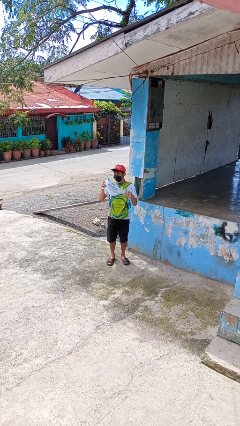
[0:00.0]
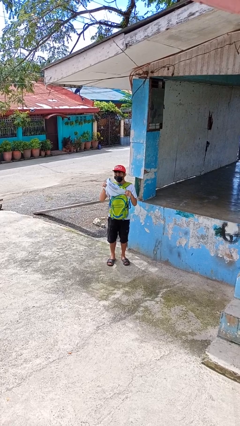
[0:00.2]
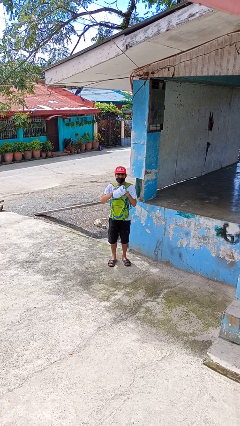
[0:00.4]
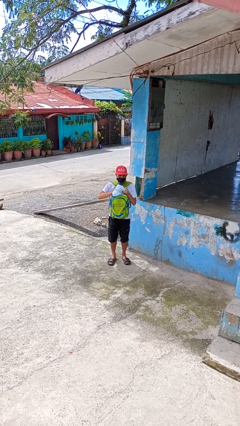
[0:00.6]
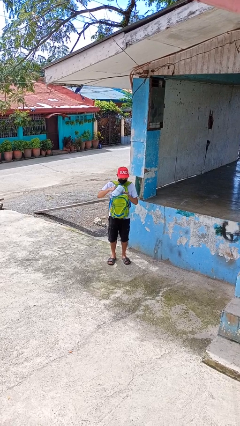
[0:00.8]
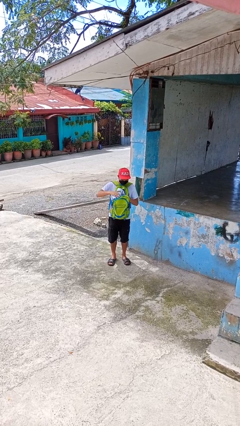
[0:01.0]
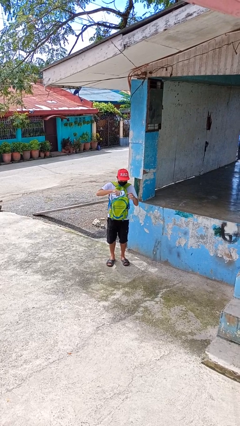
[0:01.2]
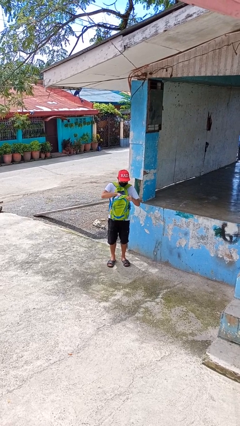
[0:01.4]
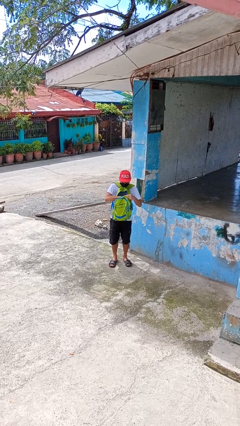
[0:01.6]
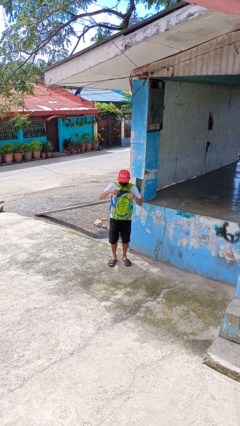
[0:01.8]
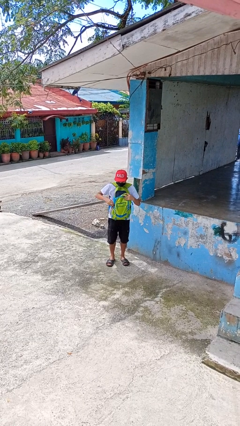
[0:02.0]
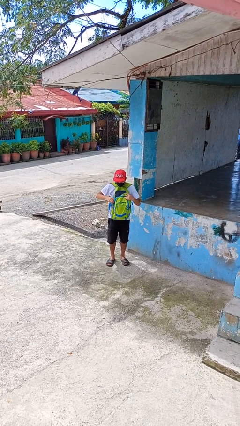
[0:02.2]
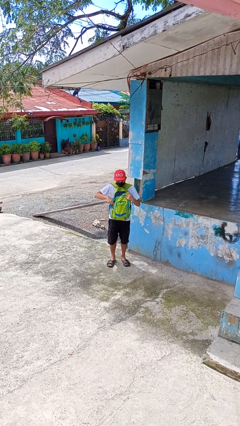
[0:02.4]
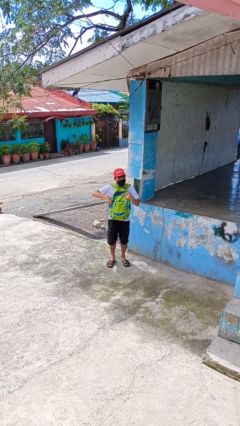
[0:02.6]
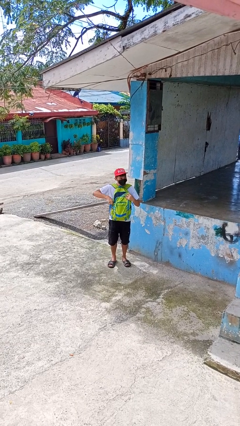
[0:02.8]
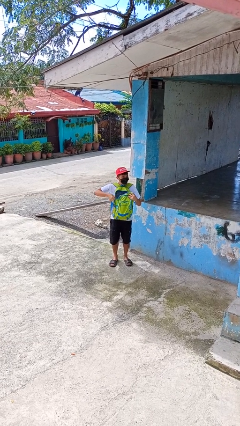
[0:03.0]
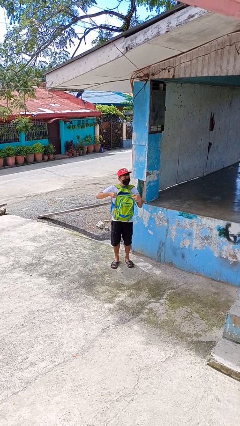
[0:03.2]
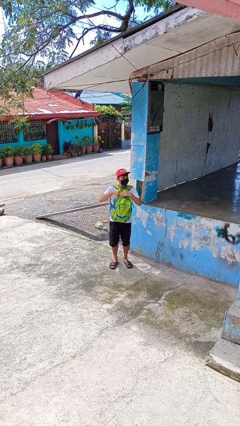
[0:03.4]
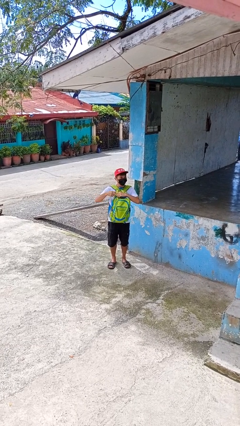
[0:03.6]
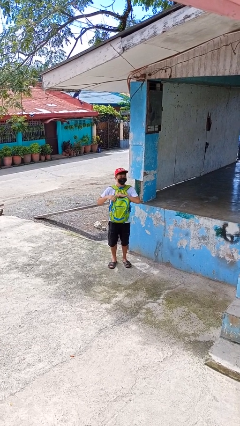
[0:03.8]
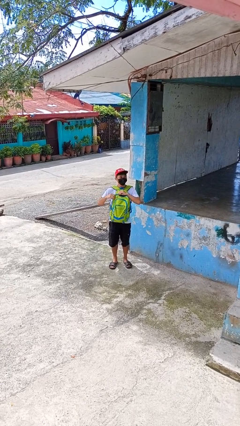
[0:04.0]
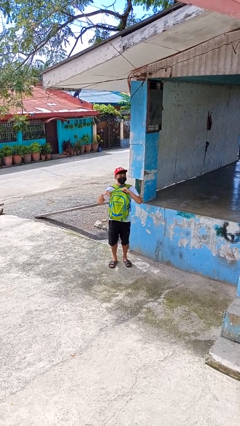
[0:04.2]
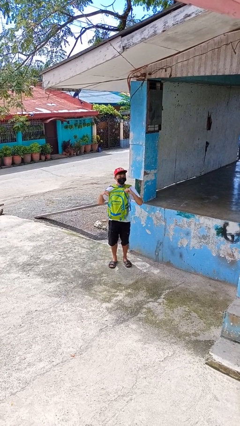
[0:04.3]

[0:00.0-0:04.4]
person puts object into backpack

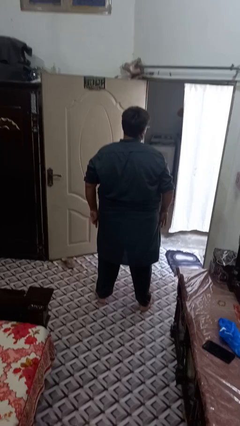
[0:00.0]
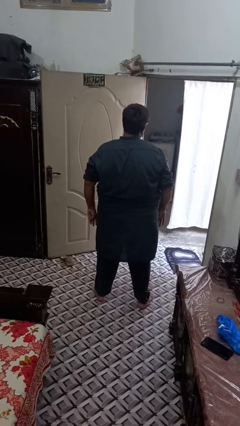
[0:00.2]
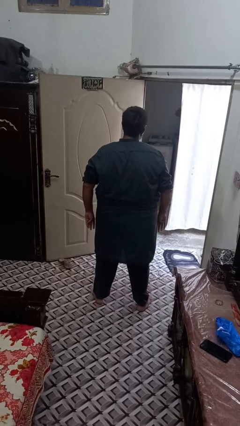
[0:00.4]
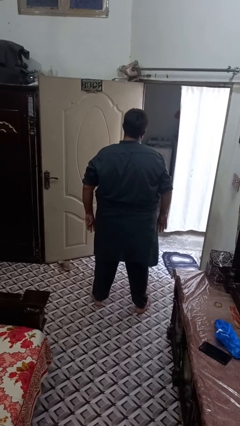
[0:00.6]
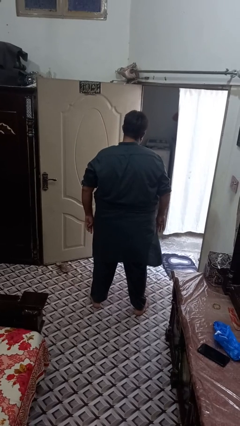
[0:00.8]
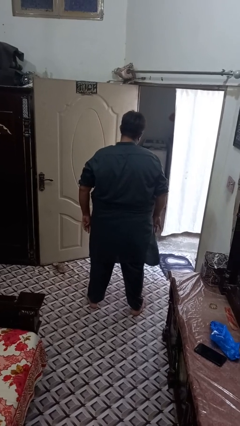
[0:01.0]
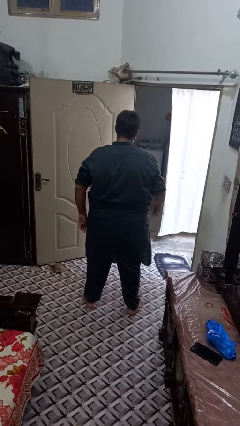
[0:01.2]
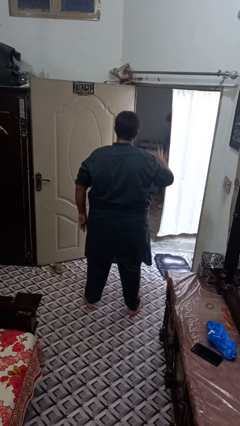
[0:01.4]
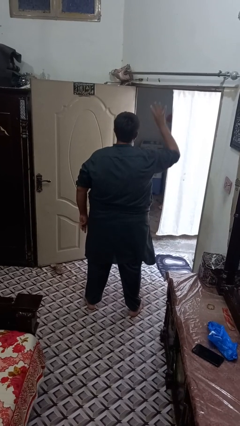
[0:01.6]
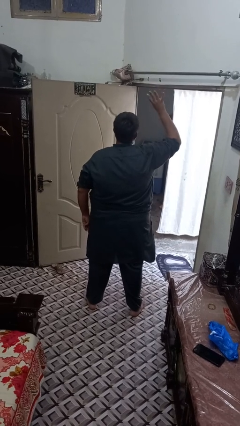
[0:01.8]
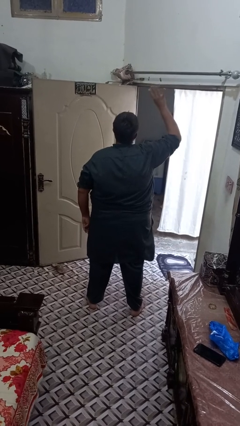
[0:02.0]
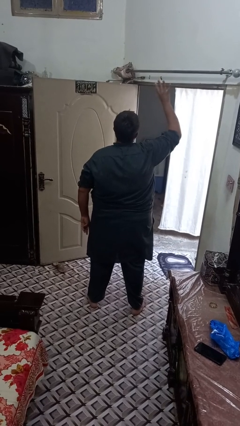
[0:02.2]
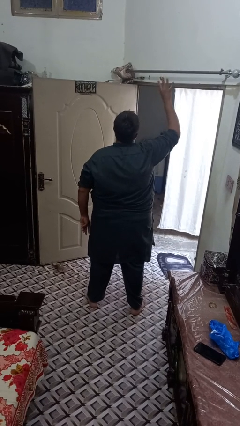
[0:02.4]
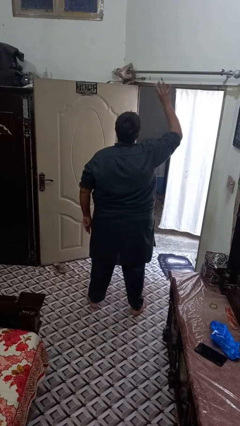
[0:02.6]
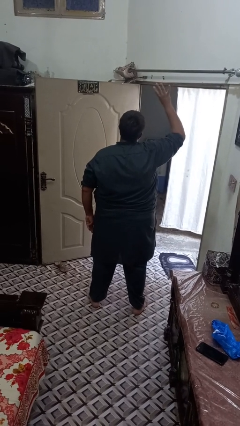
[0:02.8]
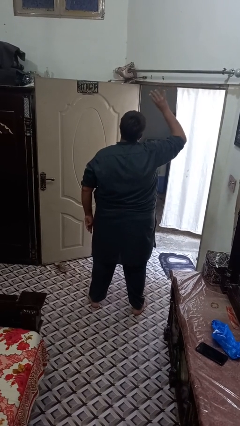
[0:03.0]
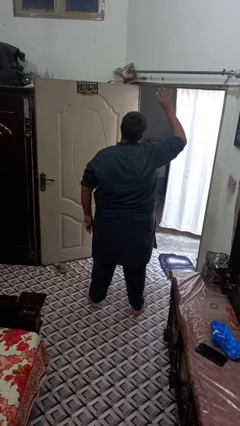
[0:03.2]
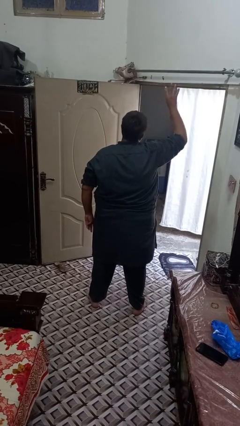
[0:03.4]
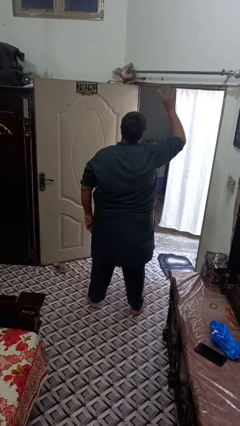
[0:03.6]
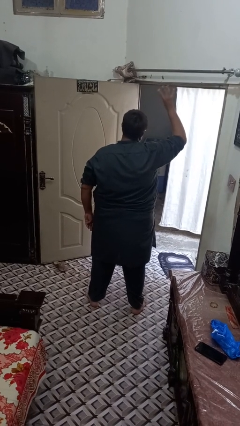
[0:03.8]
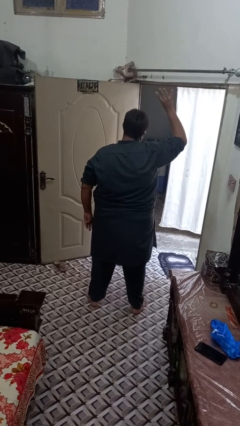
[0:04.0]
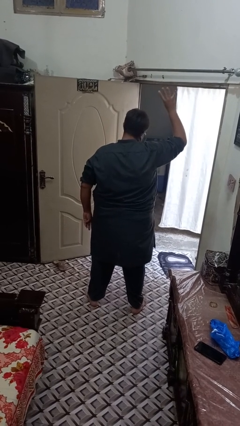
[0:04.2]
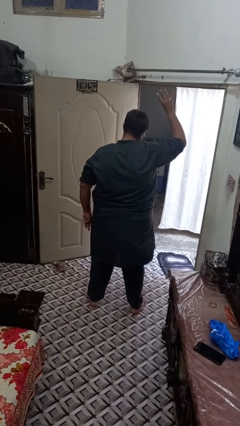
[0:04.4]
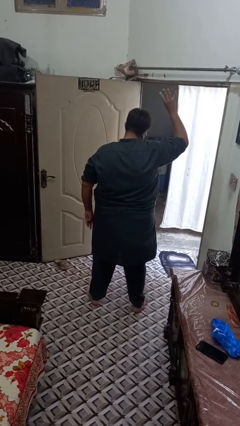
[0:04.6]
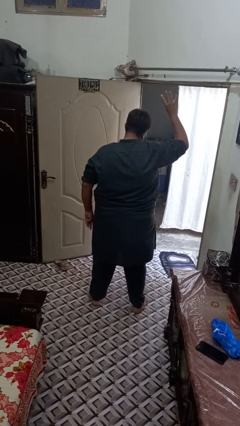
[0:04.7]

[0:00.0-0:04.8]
person gestures number four

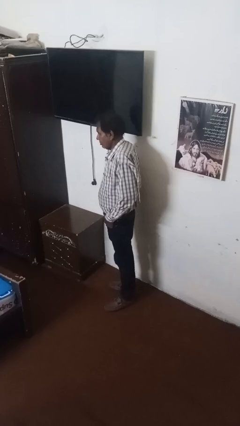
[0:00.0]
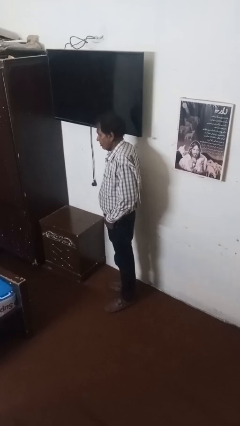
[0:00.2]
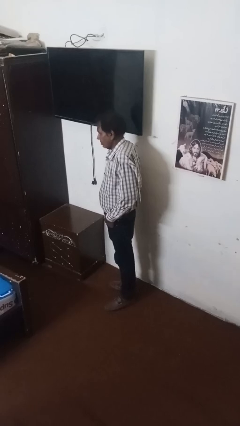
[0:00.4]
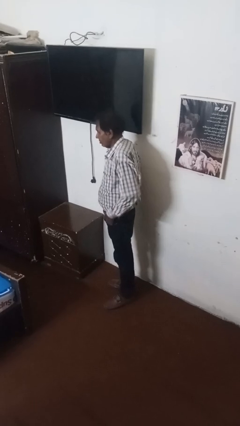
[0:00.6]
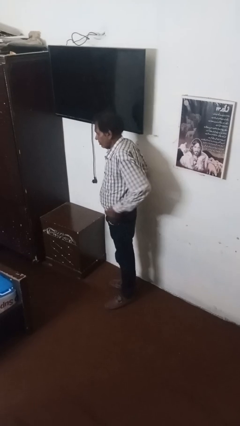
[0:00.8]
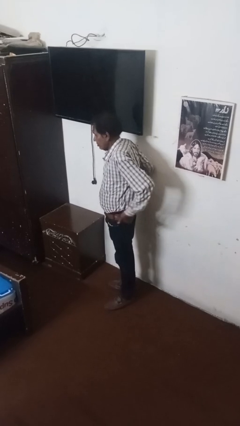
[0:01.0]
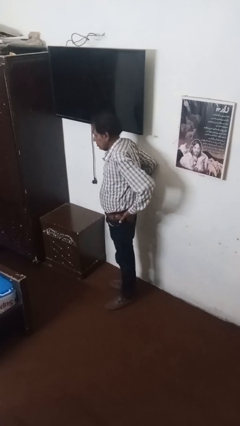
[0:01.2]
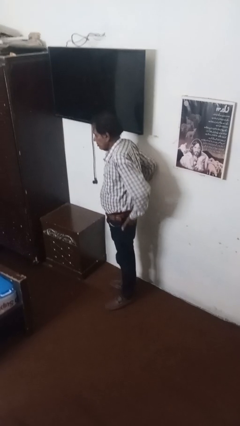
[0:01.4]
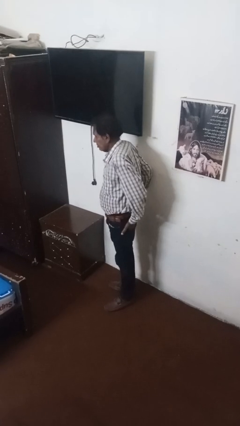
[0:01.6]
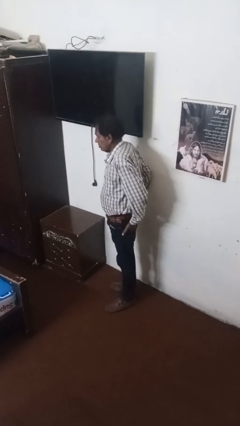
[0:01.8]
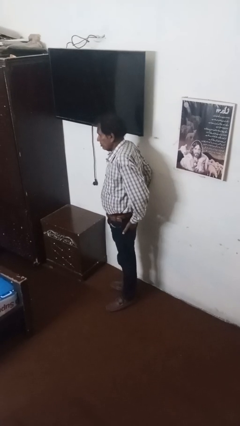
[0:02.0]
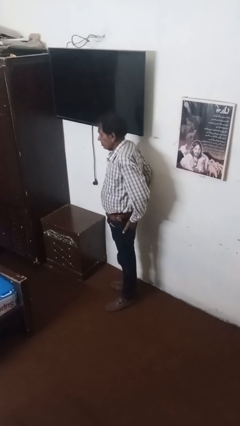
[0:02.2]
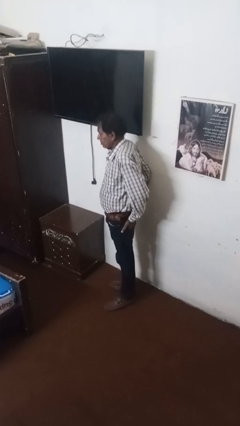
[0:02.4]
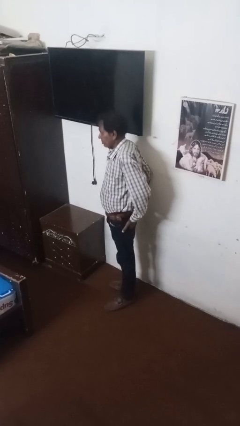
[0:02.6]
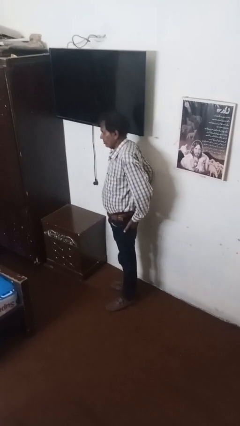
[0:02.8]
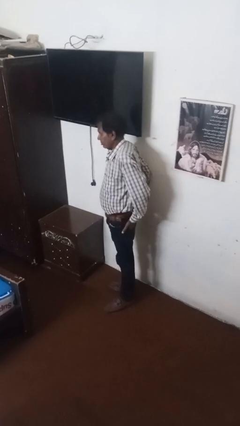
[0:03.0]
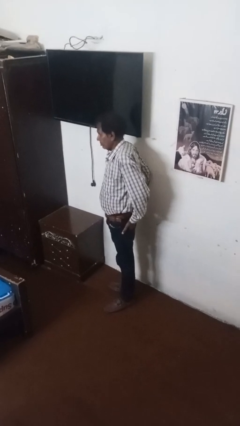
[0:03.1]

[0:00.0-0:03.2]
person puts hands in back pockets

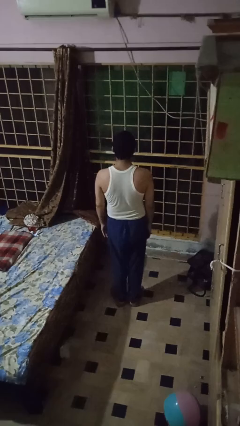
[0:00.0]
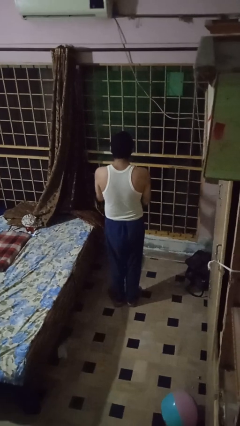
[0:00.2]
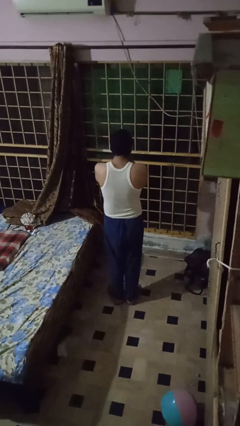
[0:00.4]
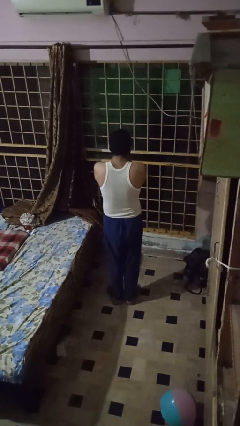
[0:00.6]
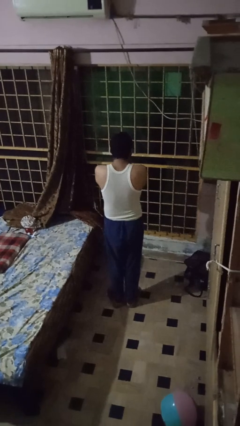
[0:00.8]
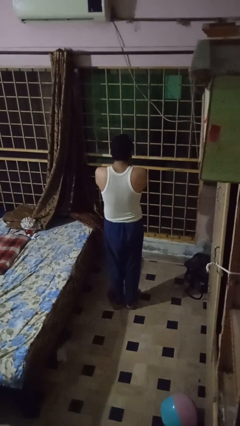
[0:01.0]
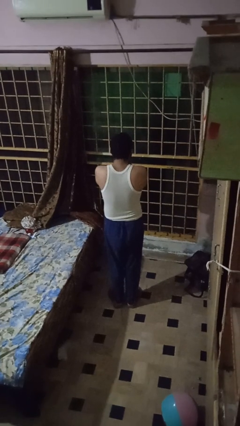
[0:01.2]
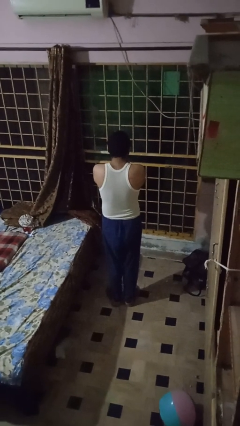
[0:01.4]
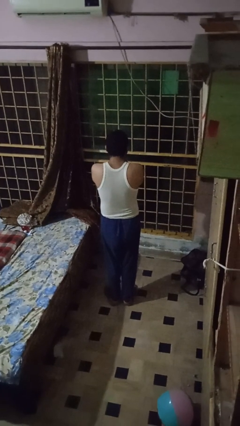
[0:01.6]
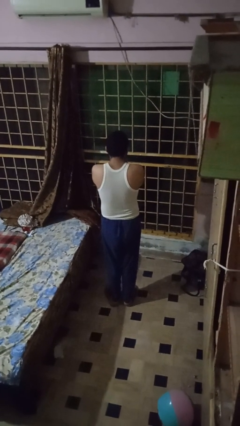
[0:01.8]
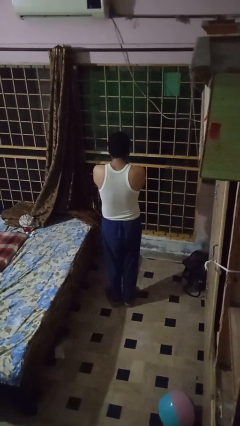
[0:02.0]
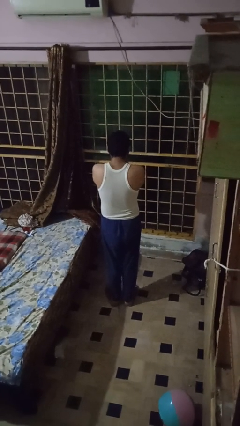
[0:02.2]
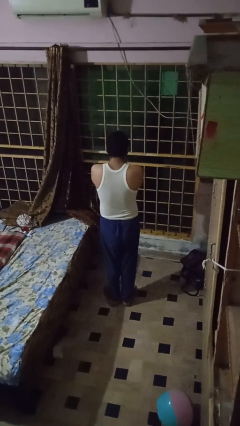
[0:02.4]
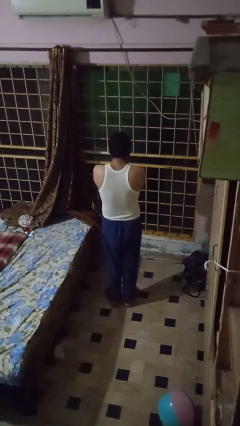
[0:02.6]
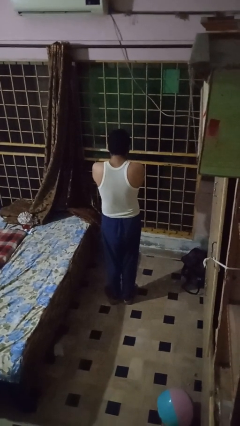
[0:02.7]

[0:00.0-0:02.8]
person covers face with hands

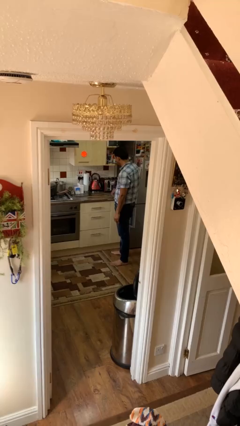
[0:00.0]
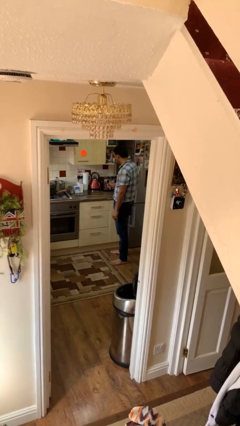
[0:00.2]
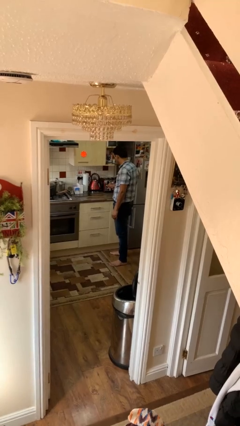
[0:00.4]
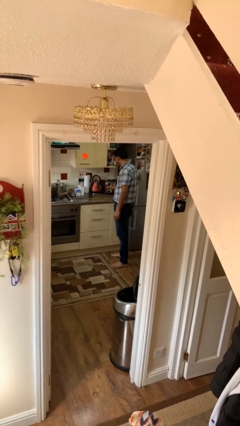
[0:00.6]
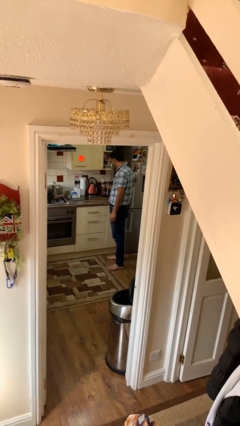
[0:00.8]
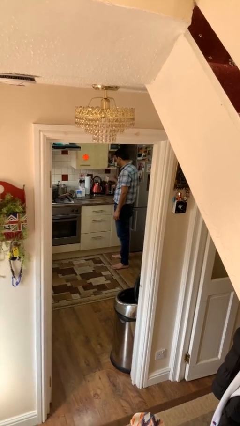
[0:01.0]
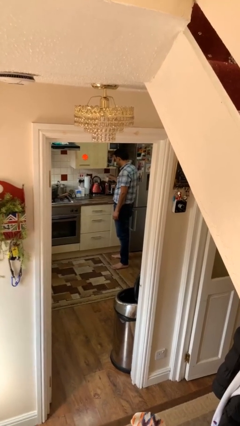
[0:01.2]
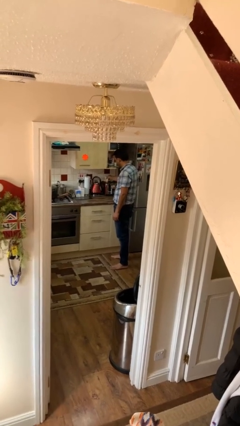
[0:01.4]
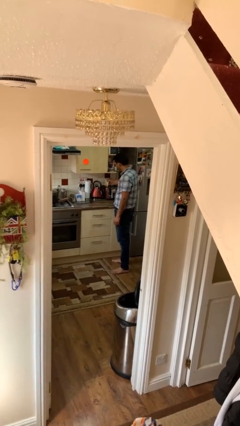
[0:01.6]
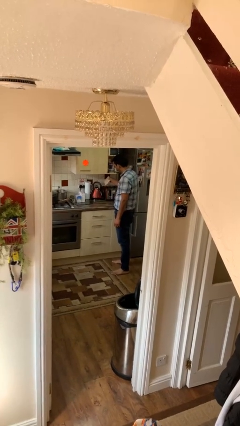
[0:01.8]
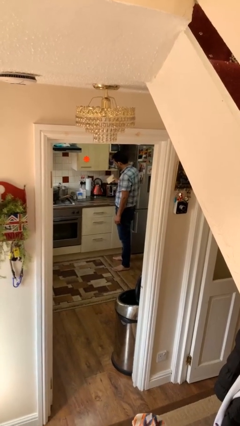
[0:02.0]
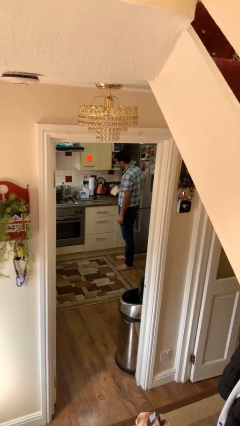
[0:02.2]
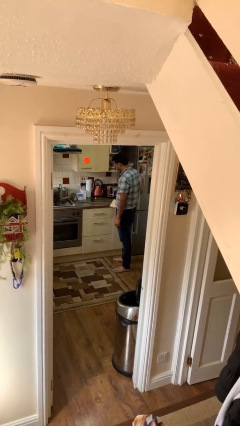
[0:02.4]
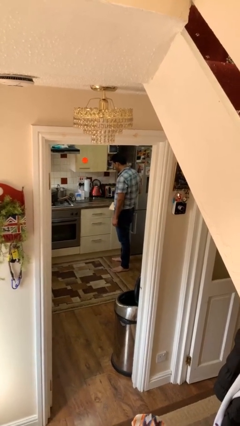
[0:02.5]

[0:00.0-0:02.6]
person takes object from toaster
